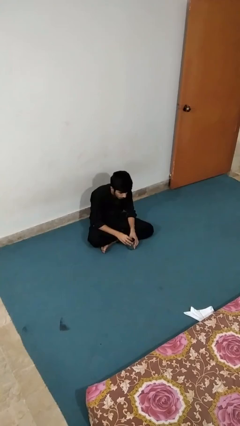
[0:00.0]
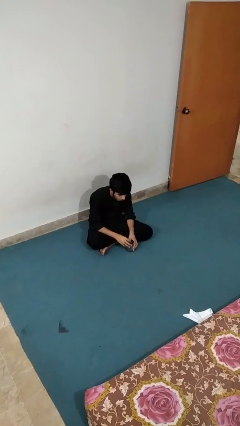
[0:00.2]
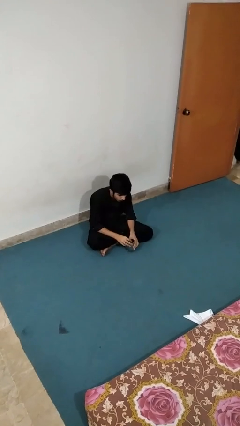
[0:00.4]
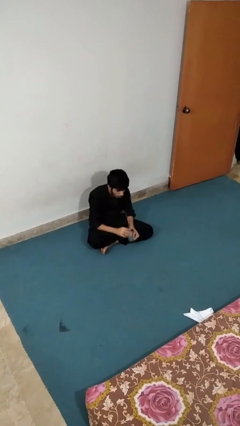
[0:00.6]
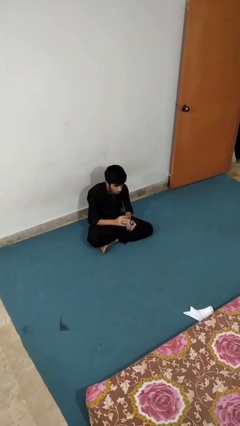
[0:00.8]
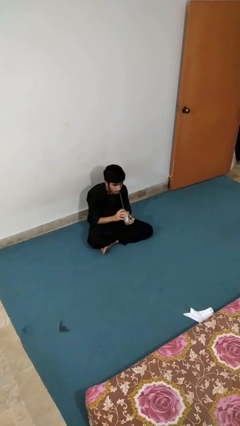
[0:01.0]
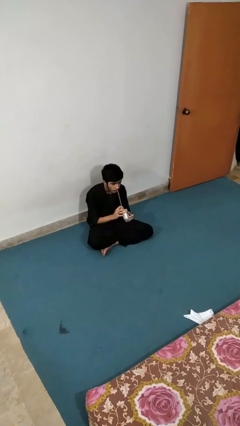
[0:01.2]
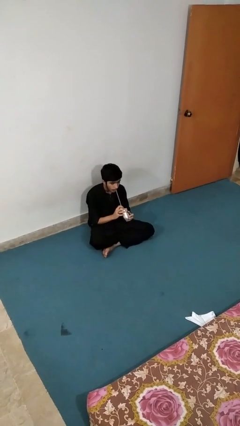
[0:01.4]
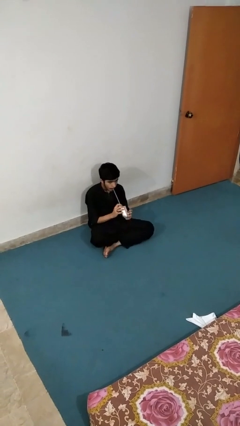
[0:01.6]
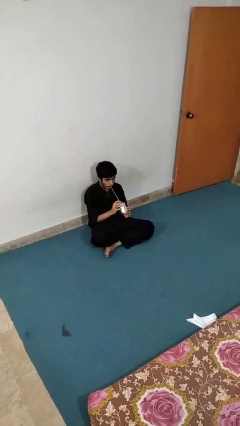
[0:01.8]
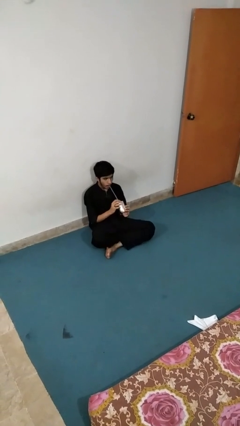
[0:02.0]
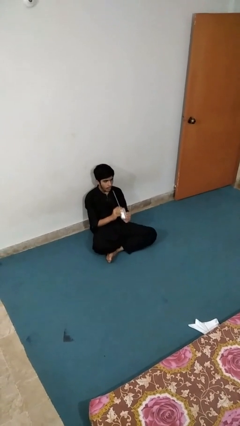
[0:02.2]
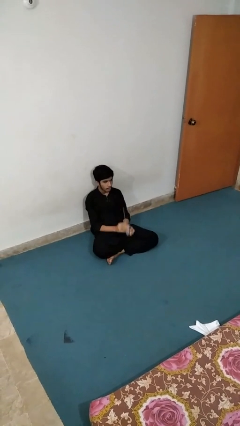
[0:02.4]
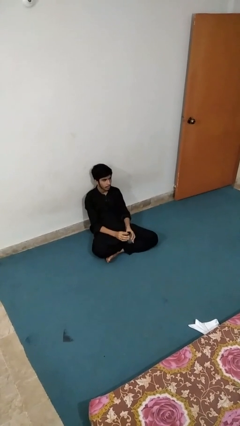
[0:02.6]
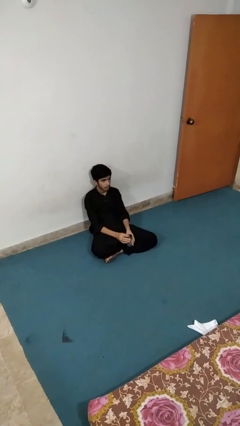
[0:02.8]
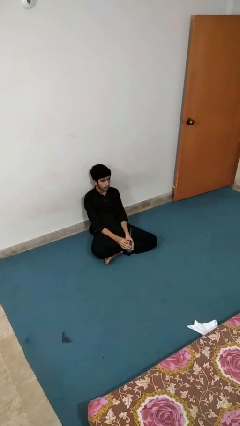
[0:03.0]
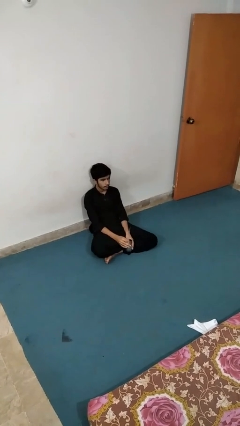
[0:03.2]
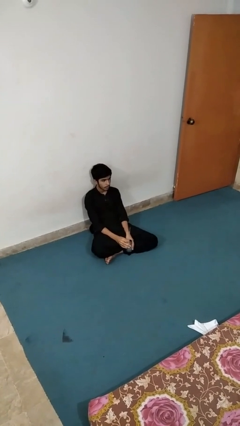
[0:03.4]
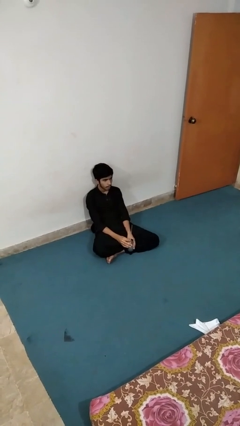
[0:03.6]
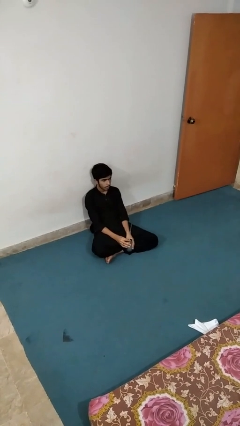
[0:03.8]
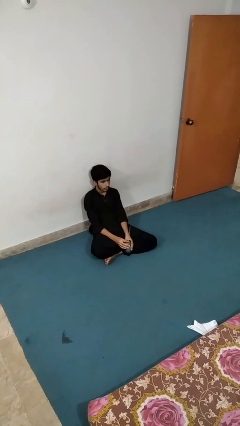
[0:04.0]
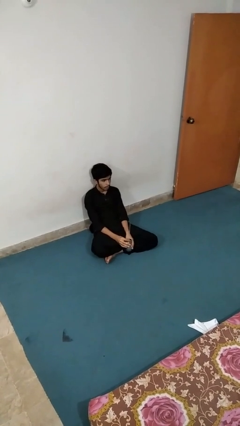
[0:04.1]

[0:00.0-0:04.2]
person drinks from straw

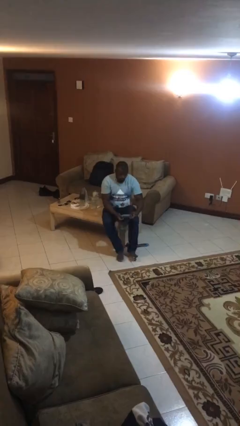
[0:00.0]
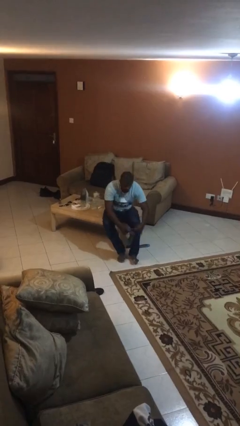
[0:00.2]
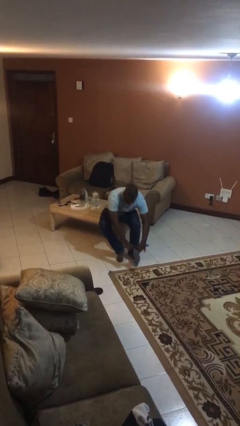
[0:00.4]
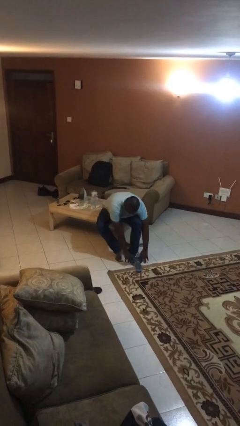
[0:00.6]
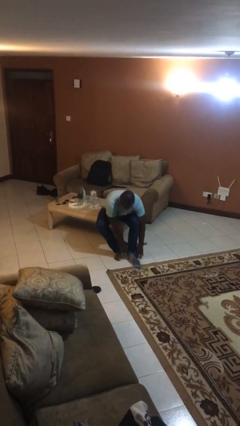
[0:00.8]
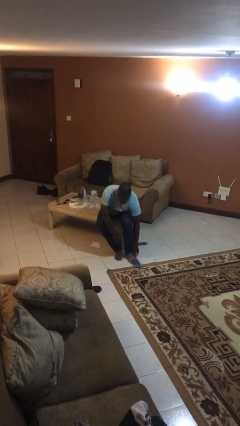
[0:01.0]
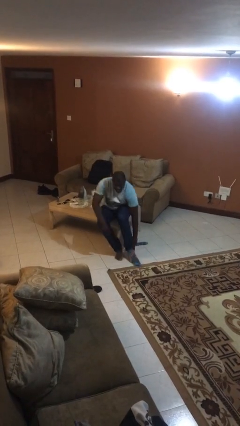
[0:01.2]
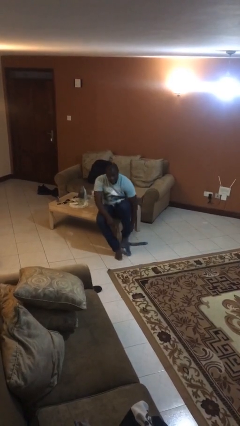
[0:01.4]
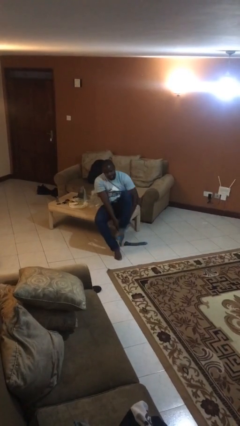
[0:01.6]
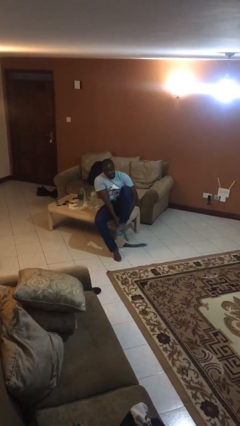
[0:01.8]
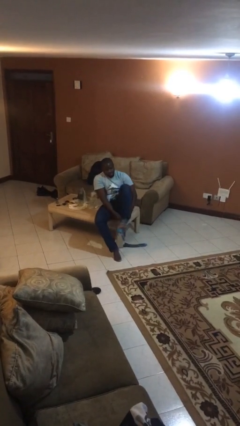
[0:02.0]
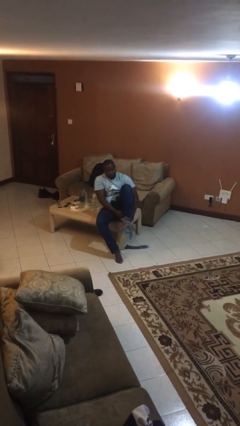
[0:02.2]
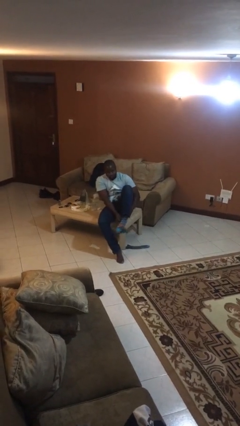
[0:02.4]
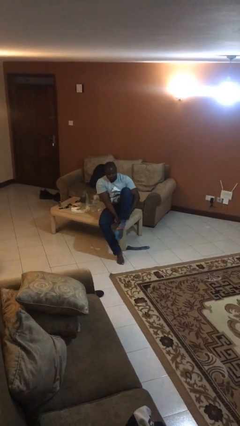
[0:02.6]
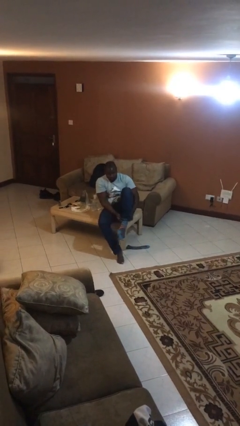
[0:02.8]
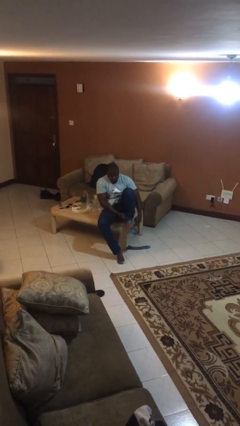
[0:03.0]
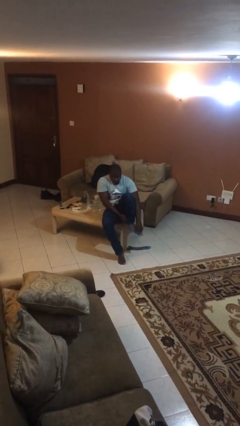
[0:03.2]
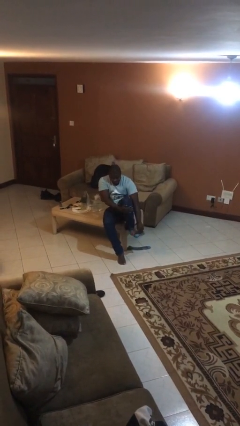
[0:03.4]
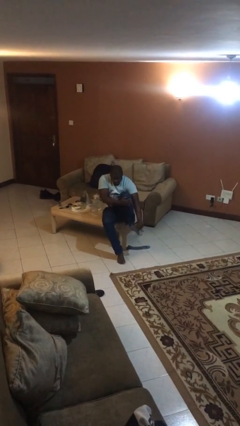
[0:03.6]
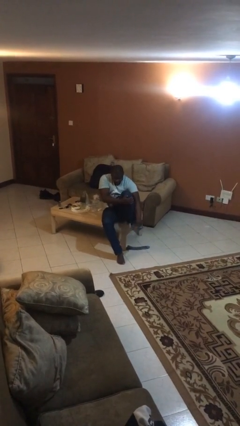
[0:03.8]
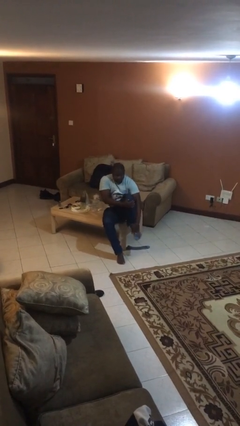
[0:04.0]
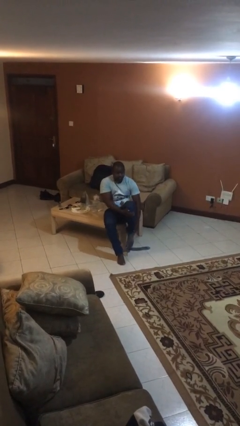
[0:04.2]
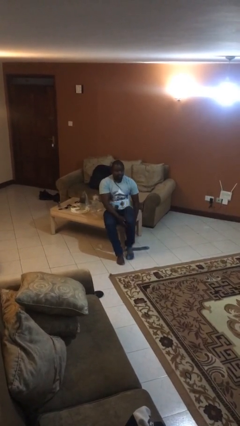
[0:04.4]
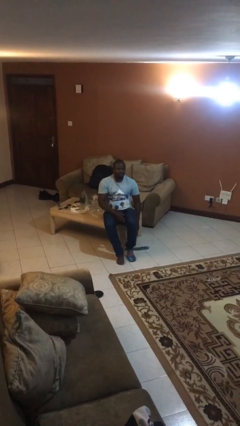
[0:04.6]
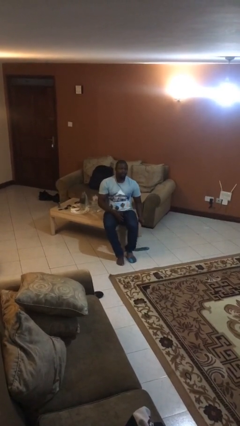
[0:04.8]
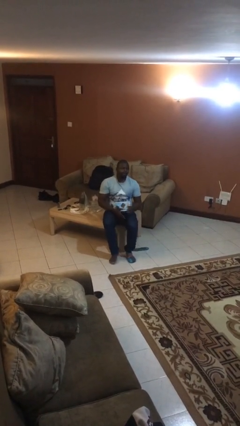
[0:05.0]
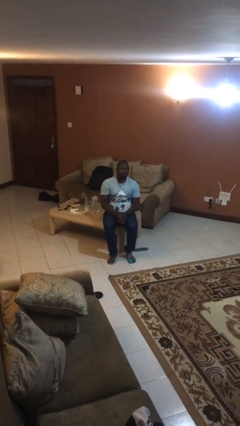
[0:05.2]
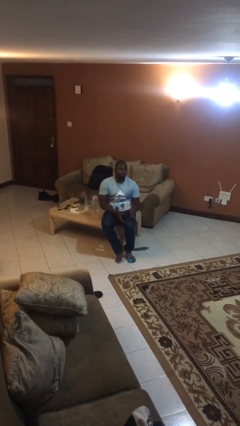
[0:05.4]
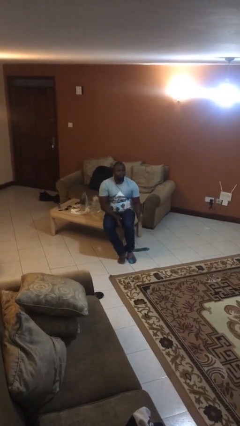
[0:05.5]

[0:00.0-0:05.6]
person puts on socks

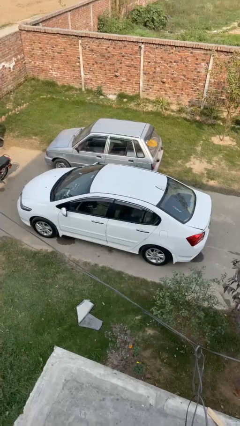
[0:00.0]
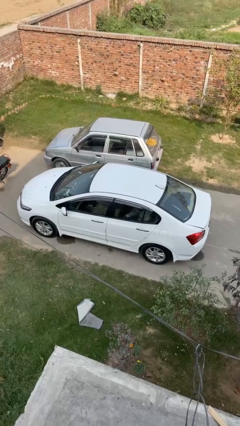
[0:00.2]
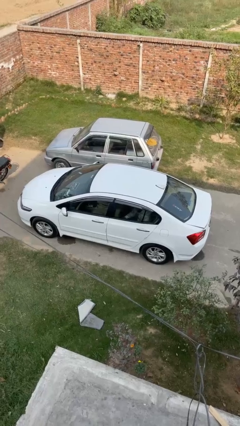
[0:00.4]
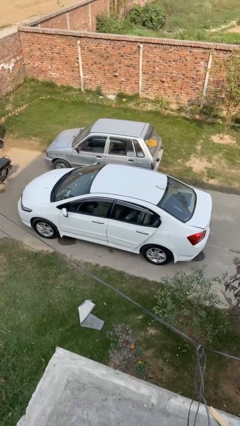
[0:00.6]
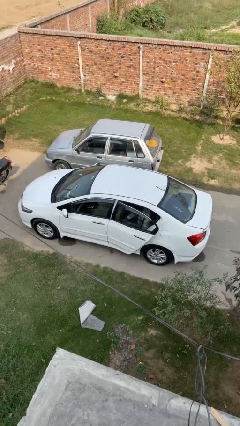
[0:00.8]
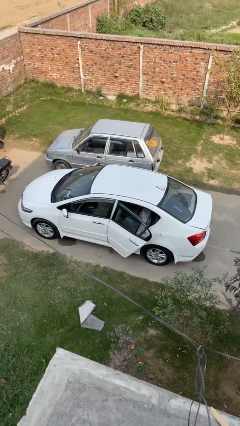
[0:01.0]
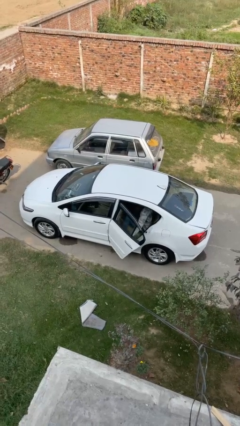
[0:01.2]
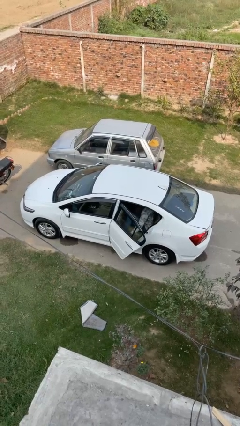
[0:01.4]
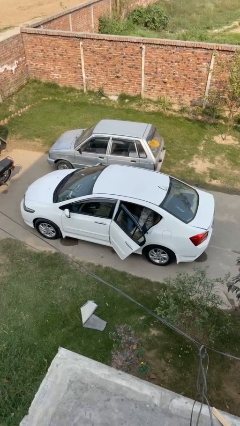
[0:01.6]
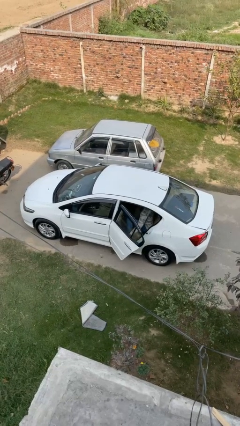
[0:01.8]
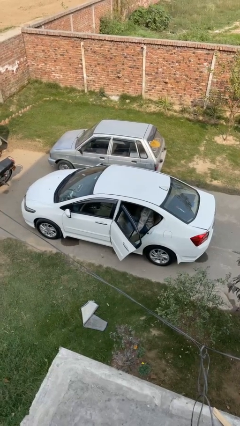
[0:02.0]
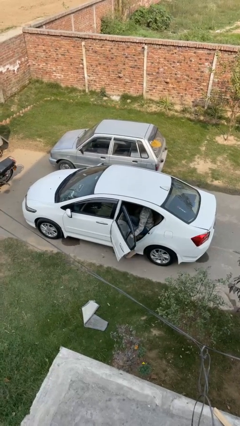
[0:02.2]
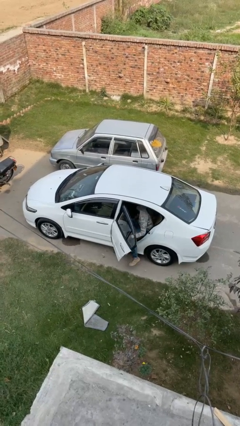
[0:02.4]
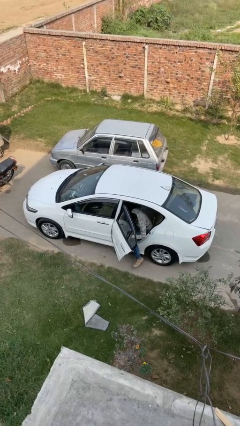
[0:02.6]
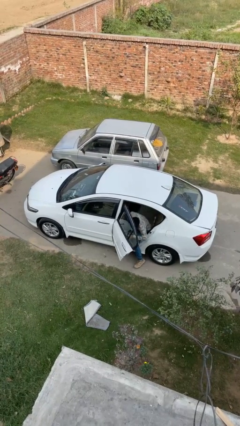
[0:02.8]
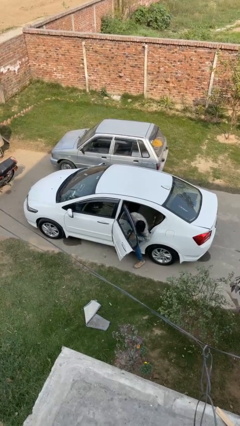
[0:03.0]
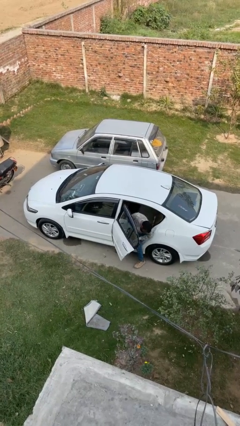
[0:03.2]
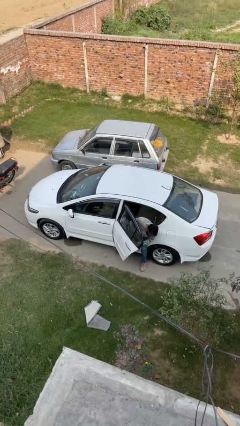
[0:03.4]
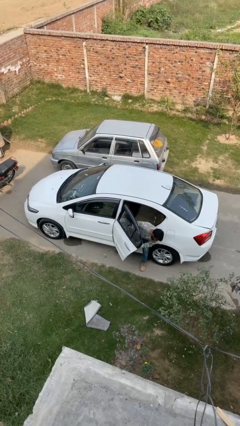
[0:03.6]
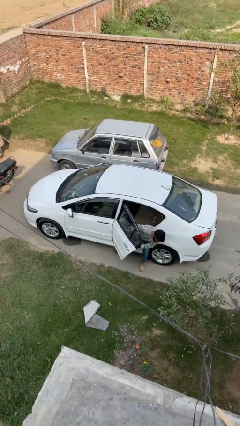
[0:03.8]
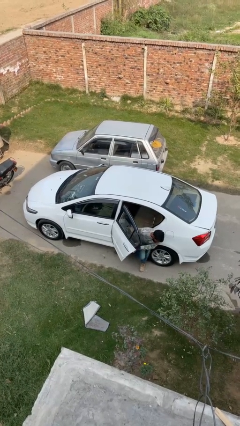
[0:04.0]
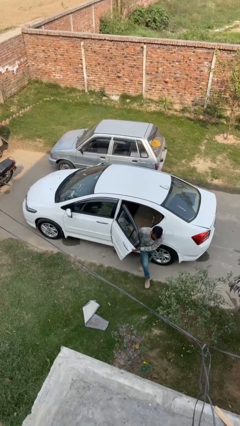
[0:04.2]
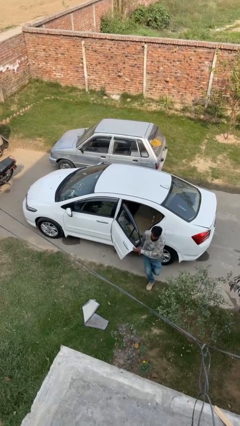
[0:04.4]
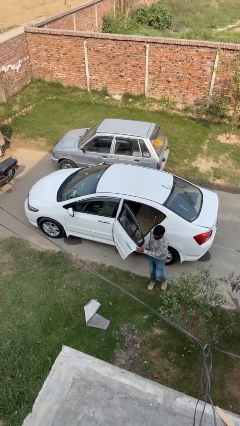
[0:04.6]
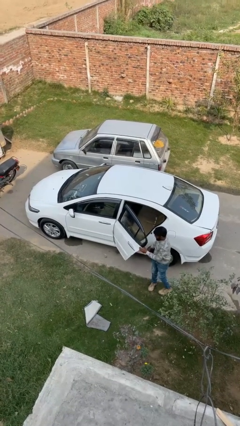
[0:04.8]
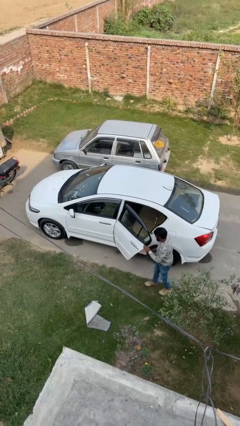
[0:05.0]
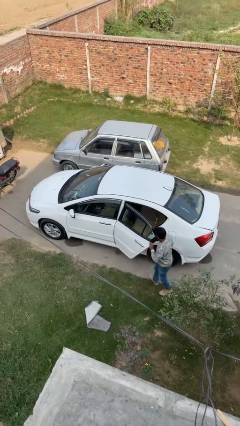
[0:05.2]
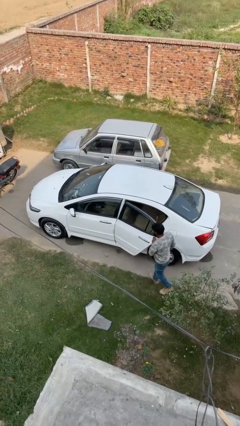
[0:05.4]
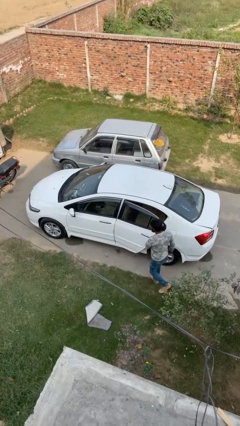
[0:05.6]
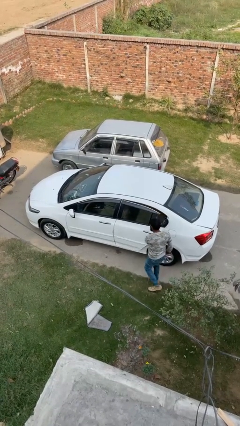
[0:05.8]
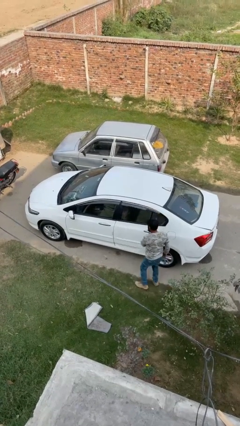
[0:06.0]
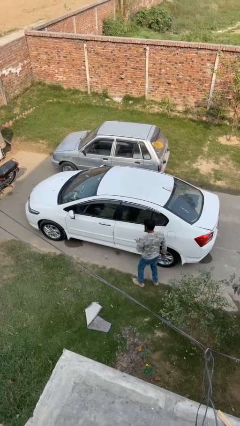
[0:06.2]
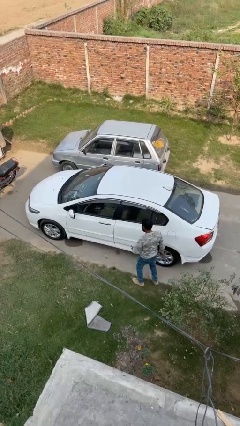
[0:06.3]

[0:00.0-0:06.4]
car drops off person

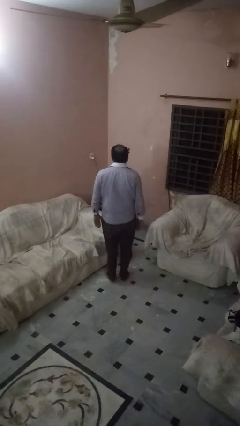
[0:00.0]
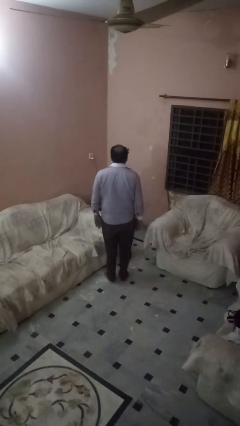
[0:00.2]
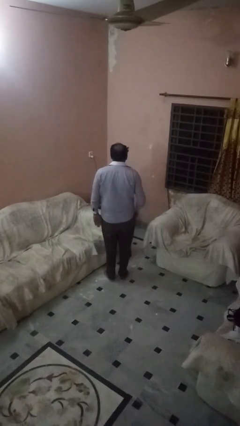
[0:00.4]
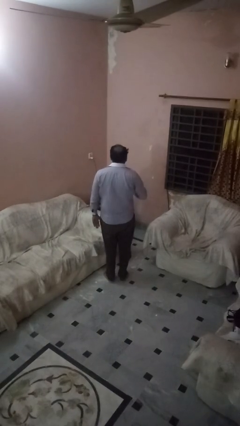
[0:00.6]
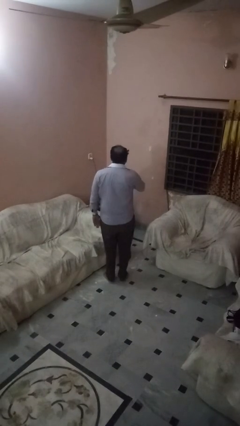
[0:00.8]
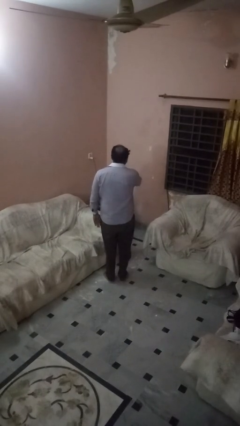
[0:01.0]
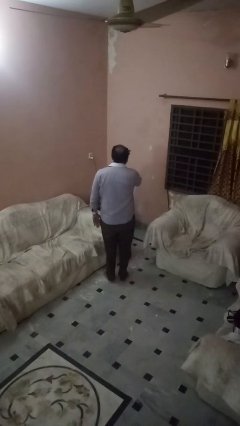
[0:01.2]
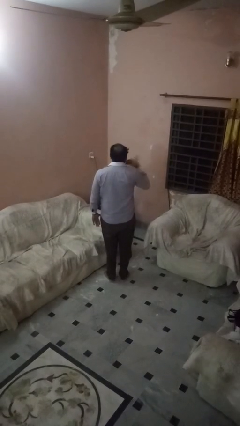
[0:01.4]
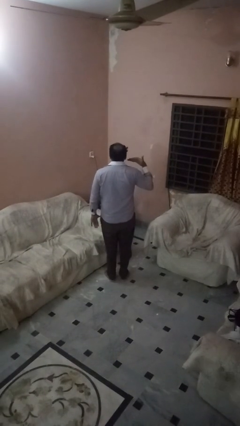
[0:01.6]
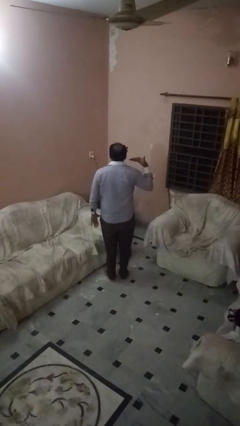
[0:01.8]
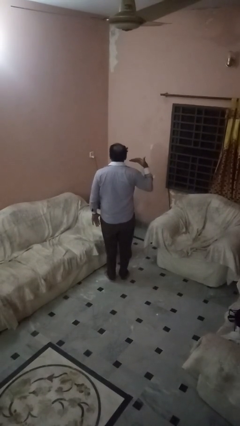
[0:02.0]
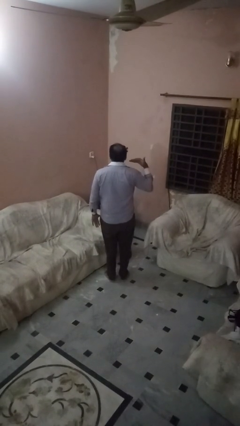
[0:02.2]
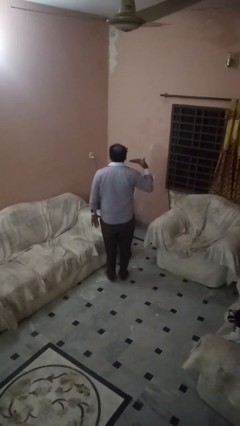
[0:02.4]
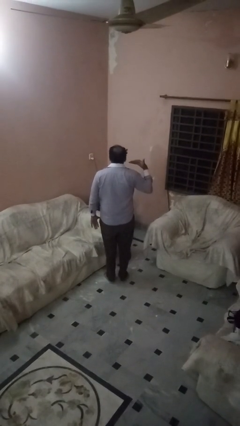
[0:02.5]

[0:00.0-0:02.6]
person gestures cut
